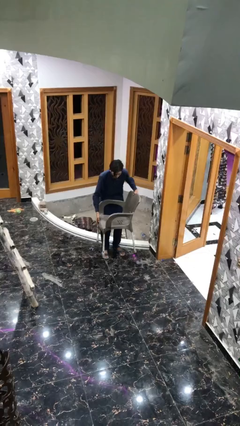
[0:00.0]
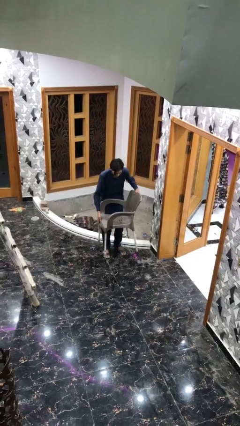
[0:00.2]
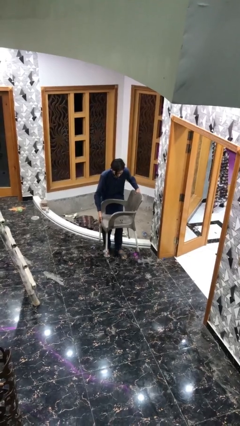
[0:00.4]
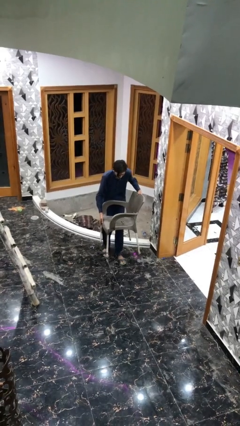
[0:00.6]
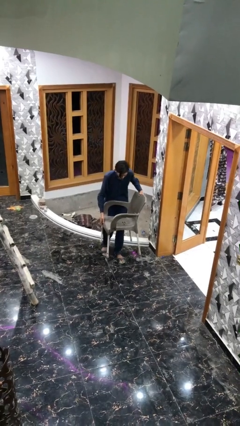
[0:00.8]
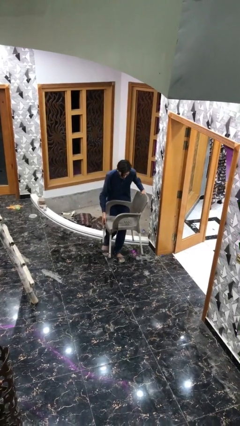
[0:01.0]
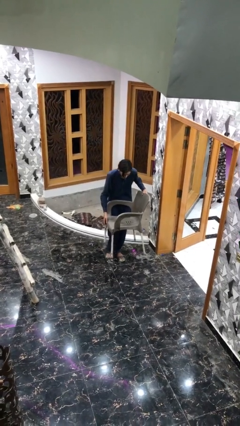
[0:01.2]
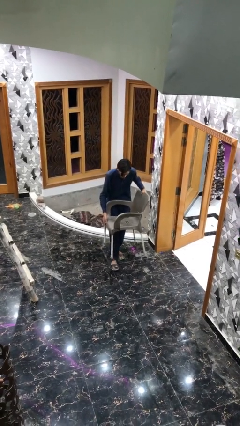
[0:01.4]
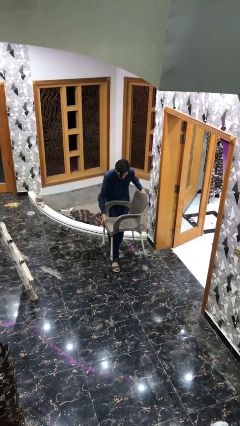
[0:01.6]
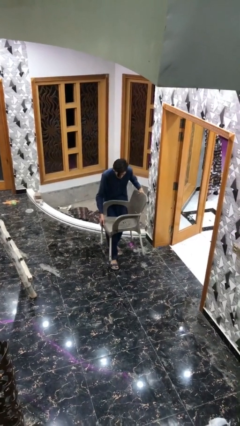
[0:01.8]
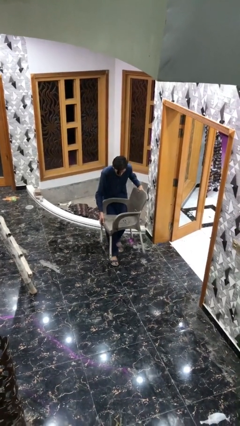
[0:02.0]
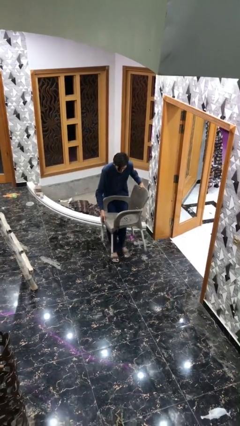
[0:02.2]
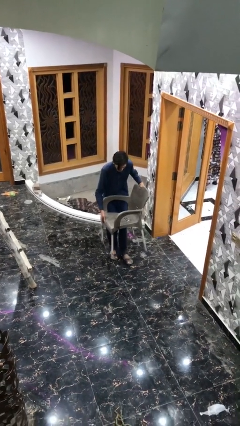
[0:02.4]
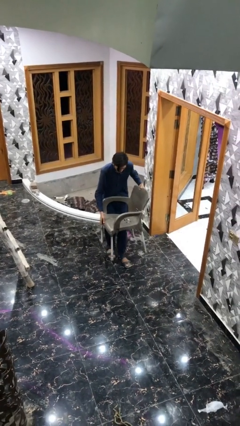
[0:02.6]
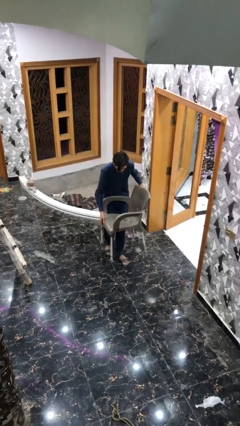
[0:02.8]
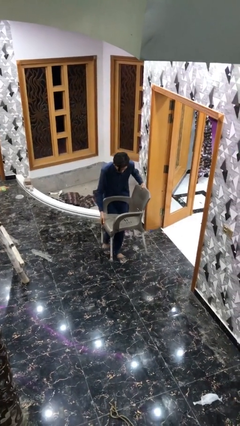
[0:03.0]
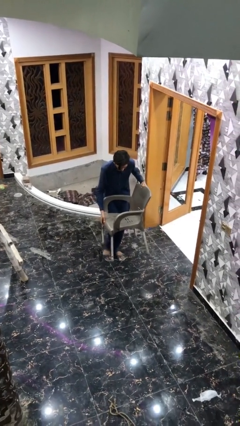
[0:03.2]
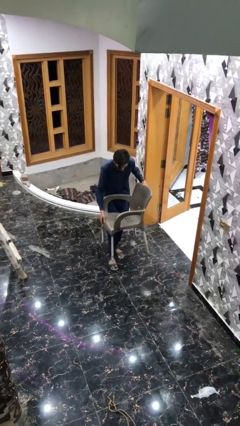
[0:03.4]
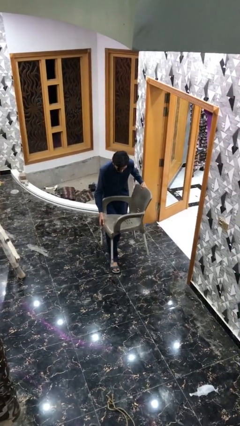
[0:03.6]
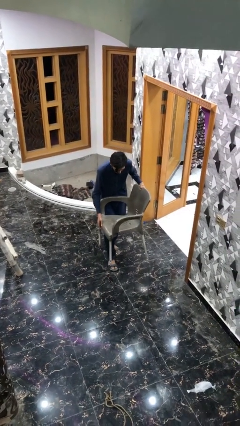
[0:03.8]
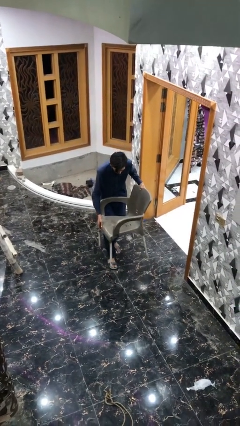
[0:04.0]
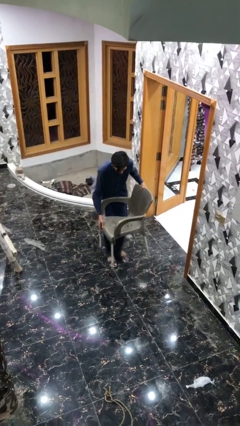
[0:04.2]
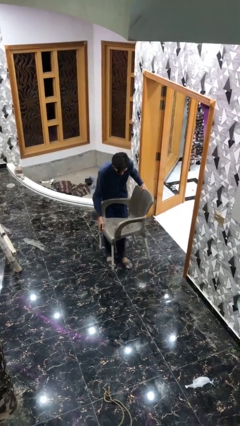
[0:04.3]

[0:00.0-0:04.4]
person carries heavy object

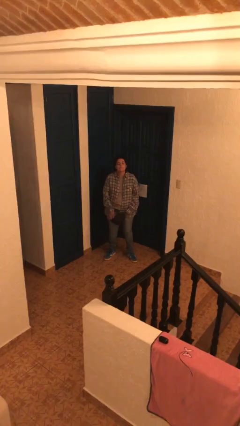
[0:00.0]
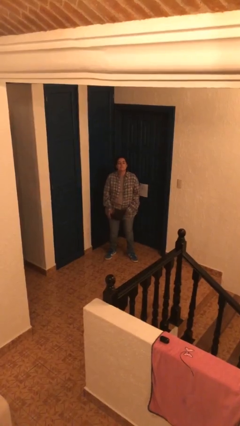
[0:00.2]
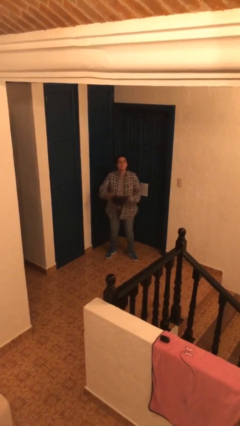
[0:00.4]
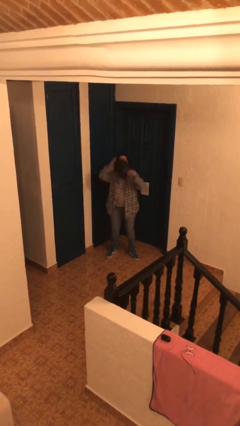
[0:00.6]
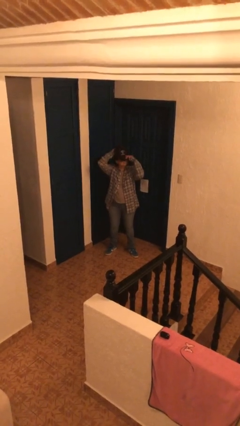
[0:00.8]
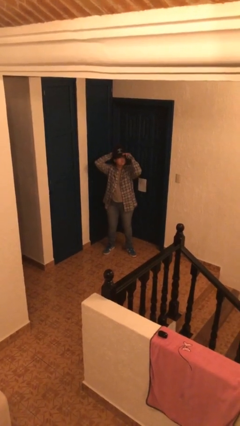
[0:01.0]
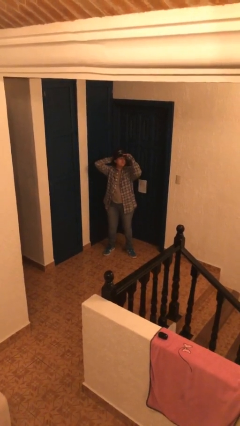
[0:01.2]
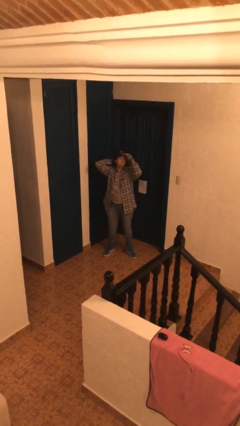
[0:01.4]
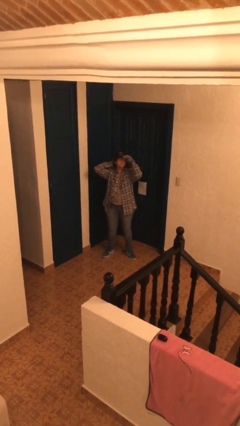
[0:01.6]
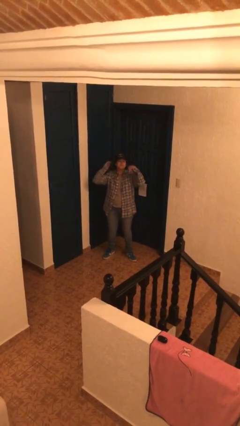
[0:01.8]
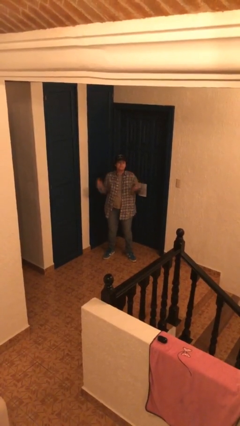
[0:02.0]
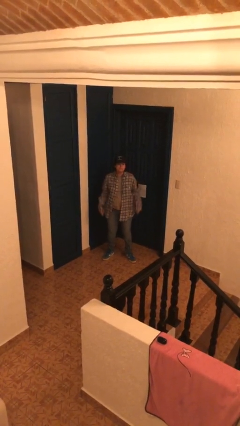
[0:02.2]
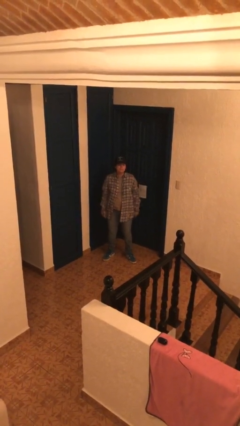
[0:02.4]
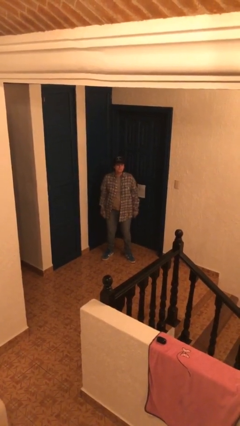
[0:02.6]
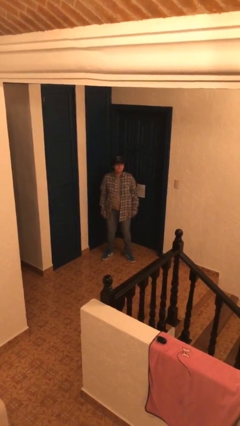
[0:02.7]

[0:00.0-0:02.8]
person puts on hat

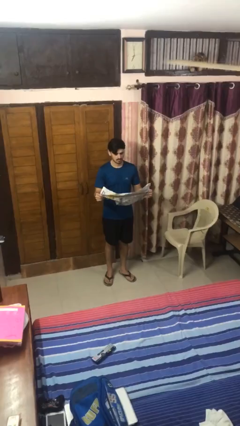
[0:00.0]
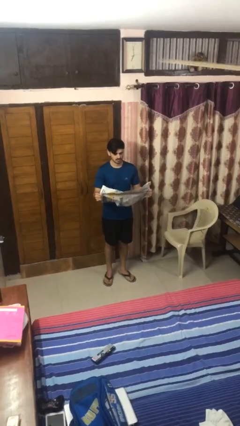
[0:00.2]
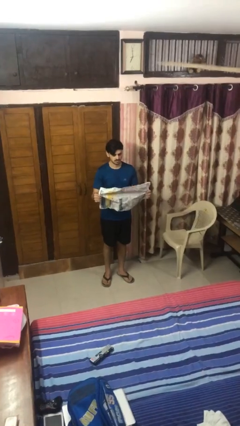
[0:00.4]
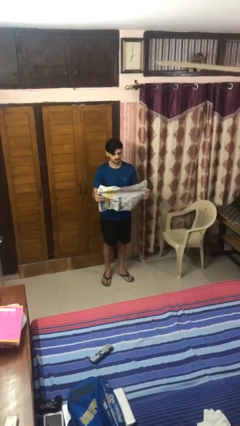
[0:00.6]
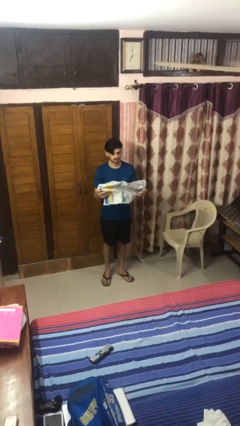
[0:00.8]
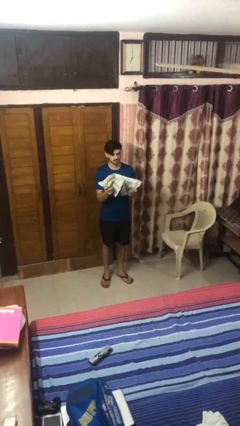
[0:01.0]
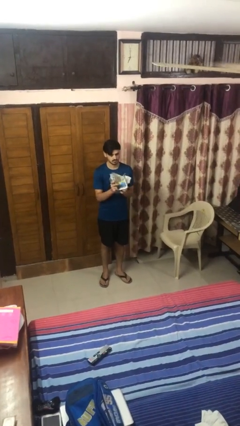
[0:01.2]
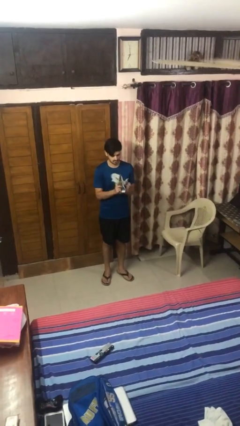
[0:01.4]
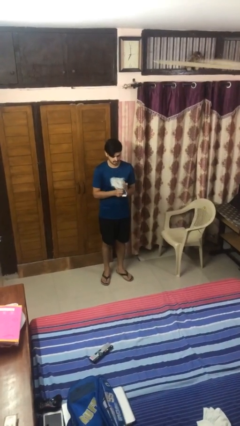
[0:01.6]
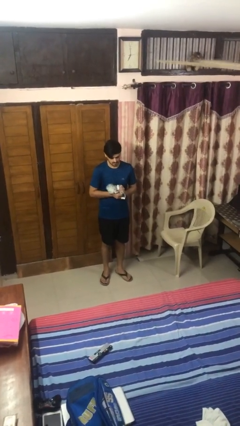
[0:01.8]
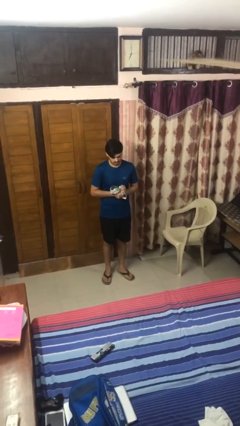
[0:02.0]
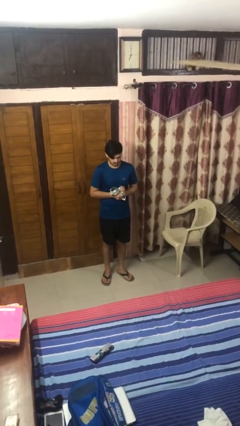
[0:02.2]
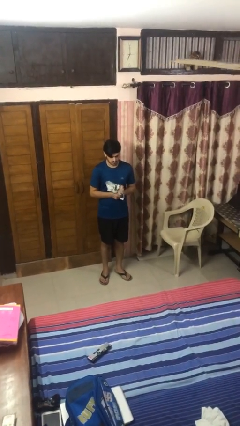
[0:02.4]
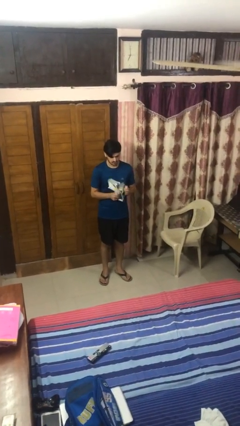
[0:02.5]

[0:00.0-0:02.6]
person crumples paper

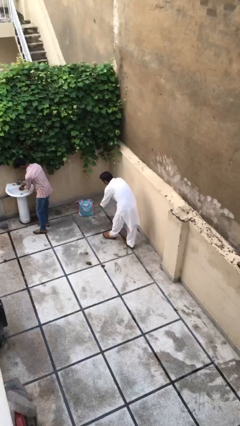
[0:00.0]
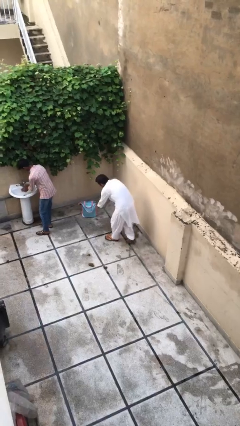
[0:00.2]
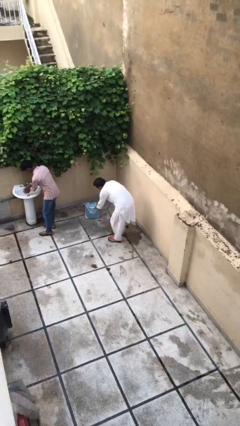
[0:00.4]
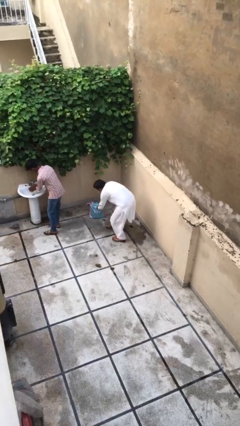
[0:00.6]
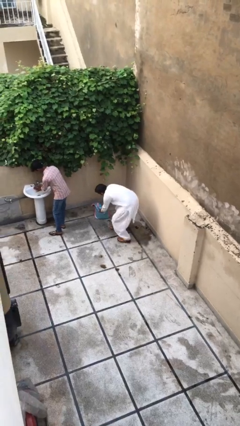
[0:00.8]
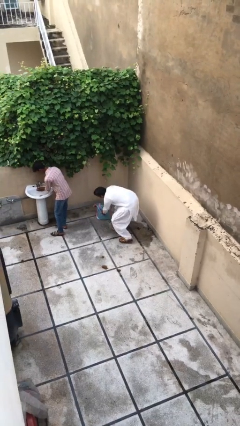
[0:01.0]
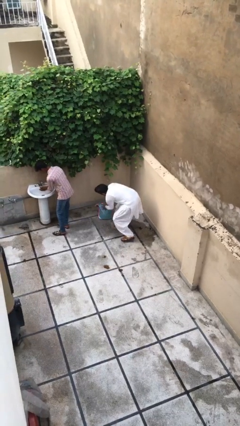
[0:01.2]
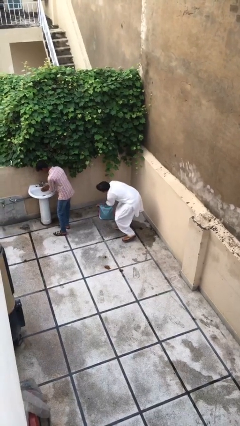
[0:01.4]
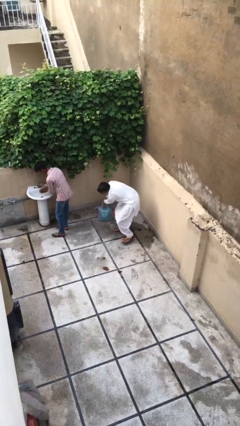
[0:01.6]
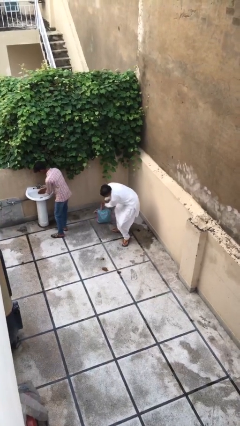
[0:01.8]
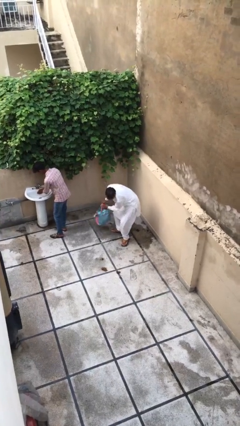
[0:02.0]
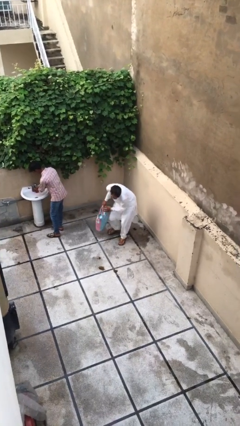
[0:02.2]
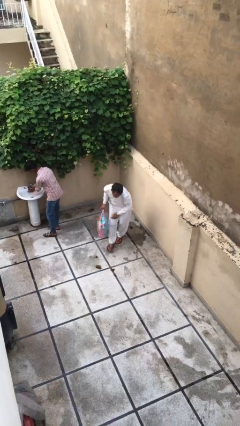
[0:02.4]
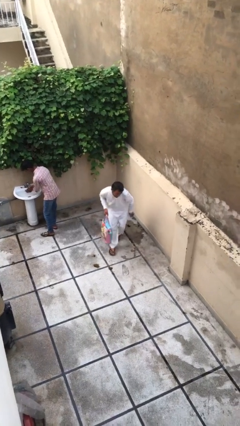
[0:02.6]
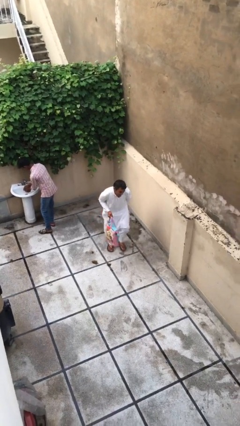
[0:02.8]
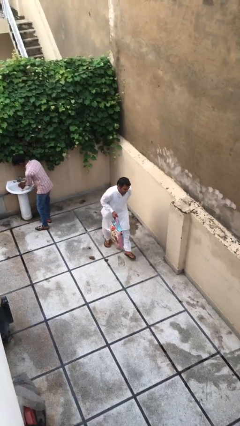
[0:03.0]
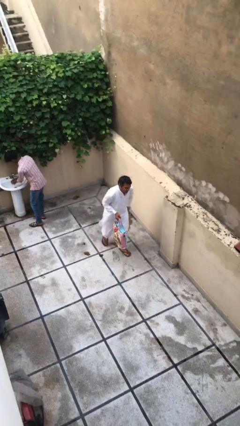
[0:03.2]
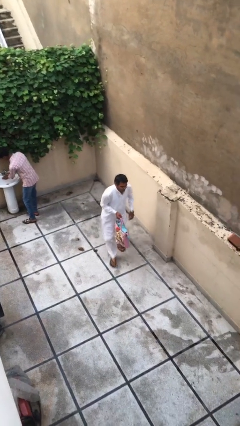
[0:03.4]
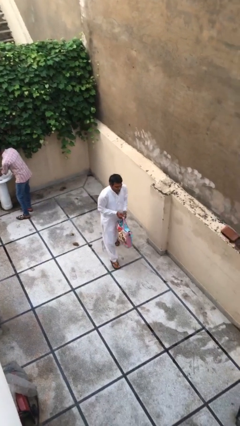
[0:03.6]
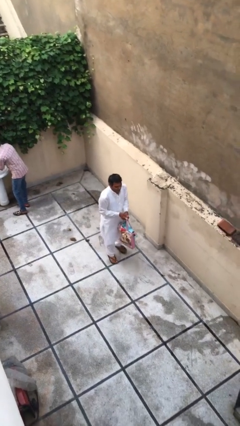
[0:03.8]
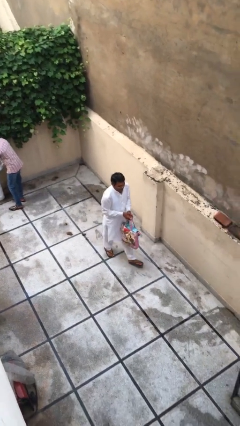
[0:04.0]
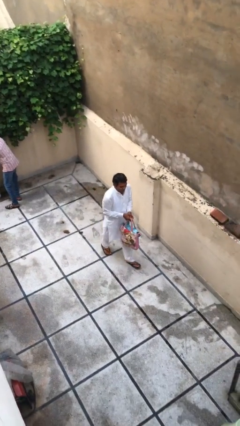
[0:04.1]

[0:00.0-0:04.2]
person steals object from person

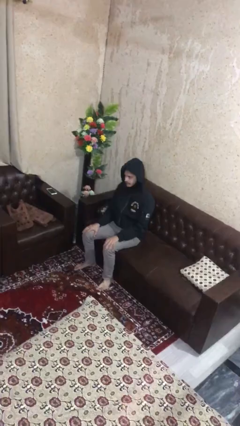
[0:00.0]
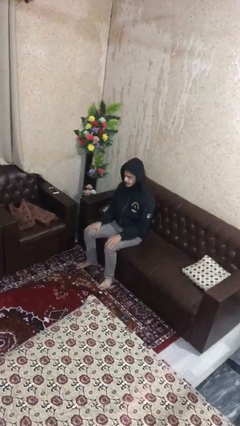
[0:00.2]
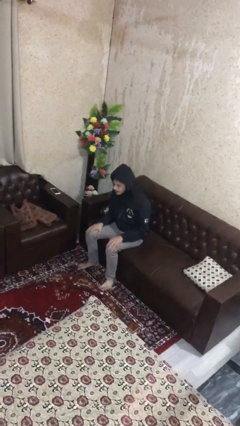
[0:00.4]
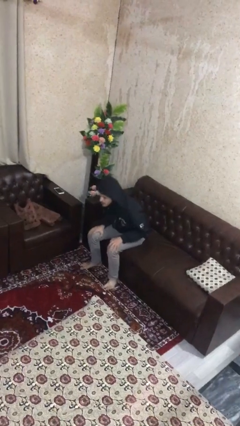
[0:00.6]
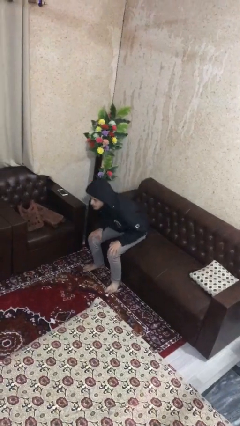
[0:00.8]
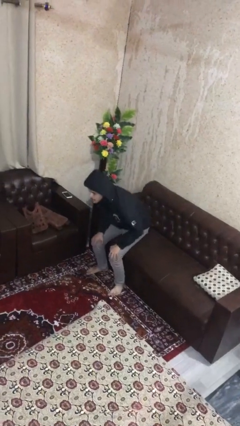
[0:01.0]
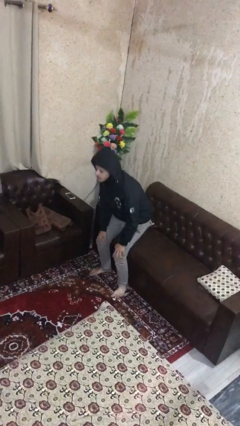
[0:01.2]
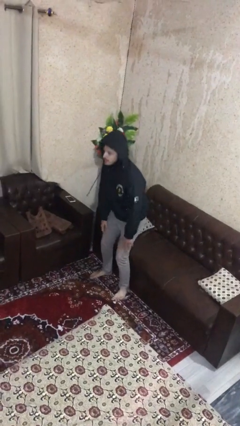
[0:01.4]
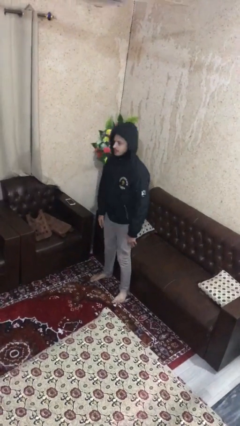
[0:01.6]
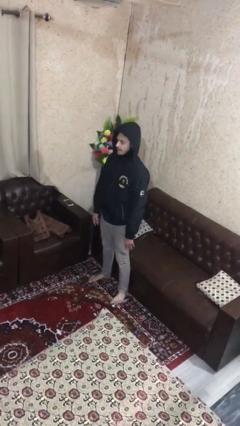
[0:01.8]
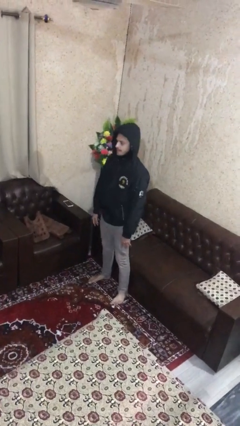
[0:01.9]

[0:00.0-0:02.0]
person stands up

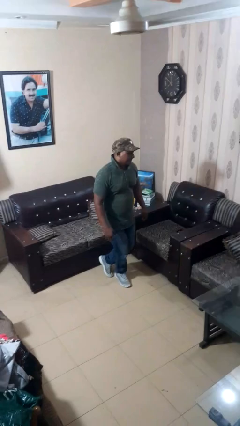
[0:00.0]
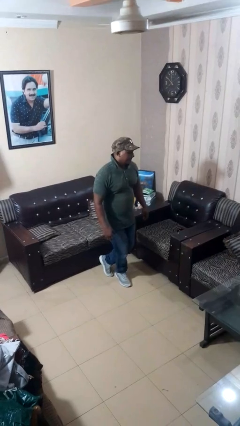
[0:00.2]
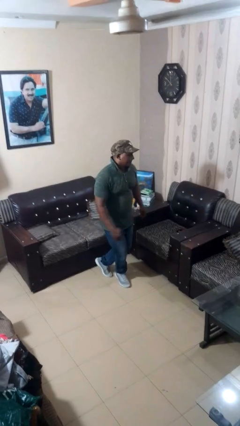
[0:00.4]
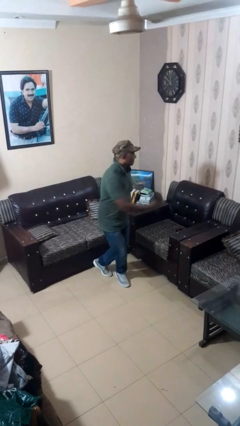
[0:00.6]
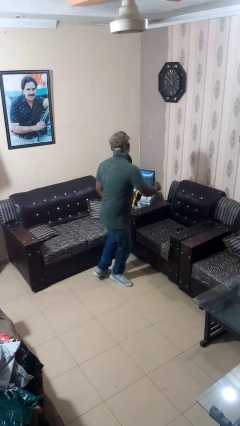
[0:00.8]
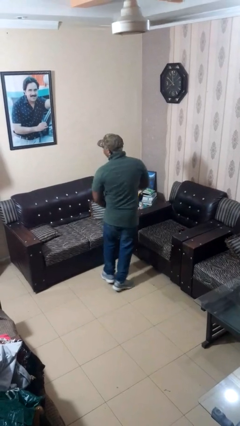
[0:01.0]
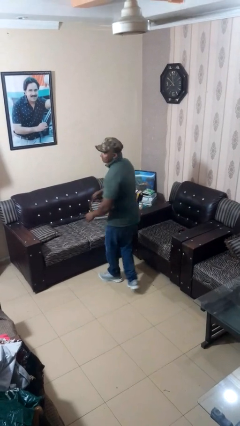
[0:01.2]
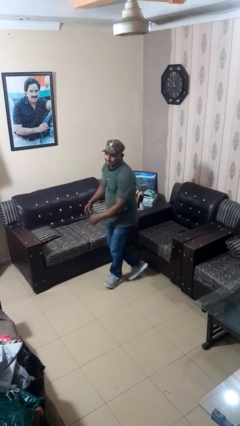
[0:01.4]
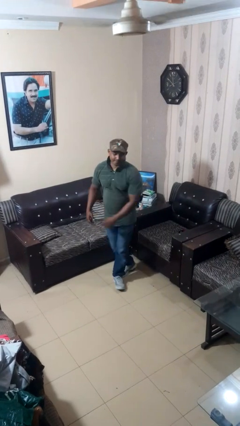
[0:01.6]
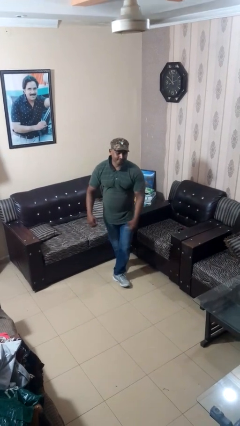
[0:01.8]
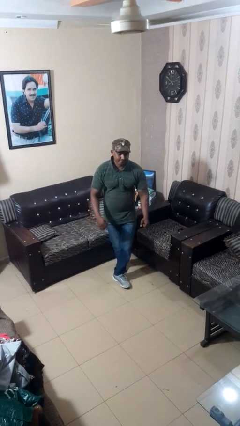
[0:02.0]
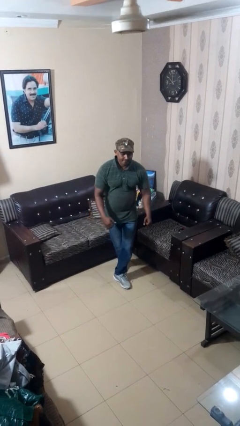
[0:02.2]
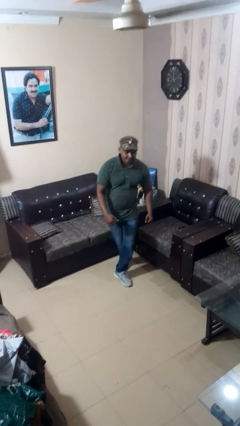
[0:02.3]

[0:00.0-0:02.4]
person twirls
